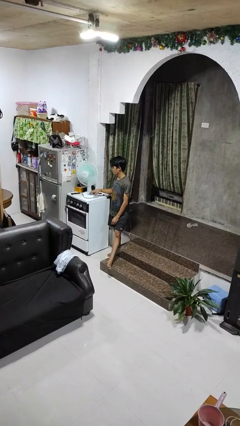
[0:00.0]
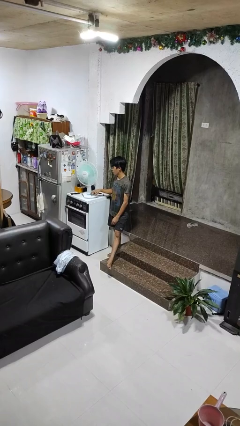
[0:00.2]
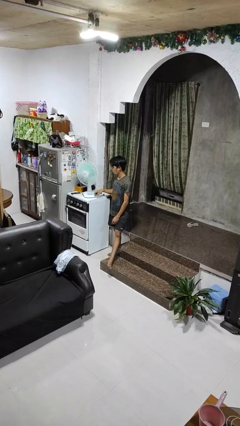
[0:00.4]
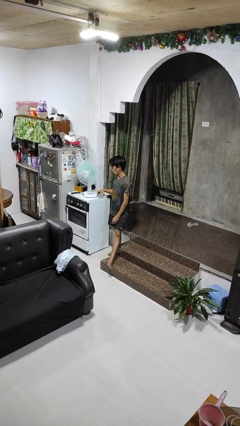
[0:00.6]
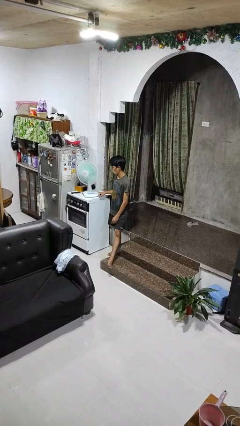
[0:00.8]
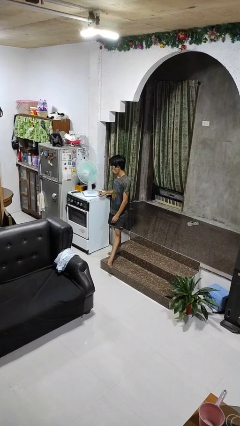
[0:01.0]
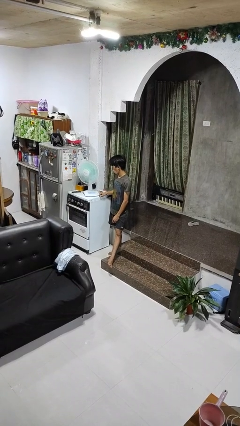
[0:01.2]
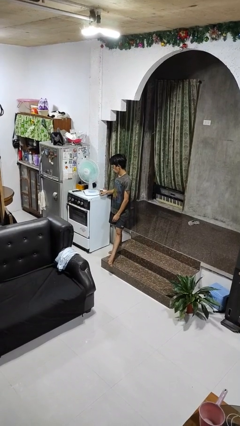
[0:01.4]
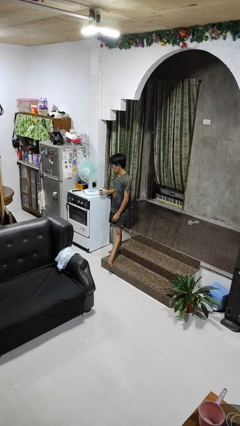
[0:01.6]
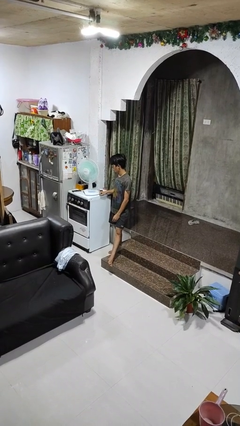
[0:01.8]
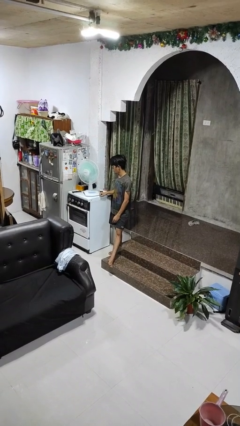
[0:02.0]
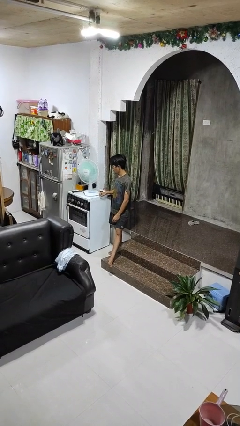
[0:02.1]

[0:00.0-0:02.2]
person turns off fan

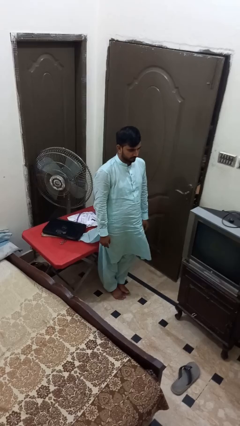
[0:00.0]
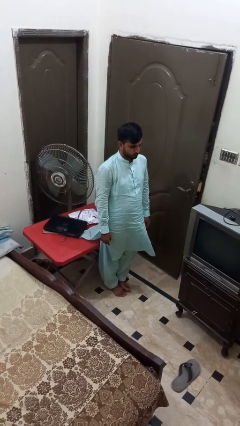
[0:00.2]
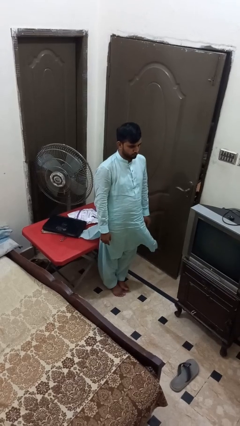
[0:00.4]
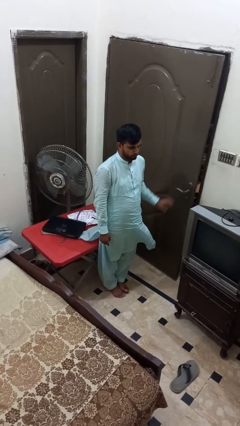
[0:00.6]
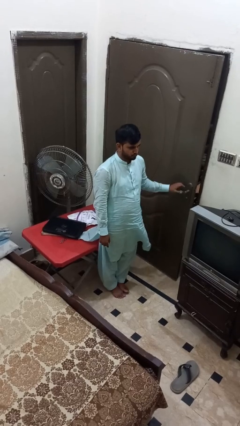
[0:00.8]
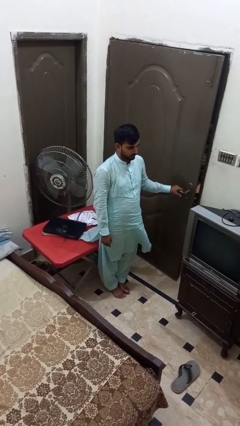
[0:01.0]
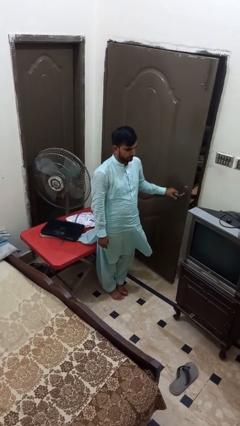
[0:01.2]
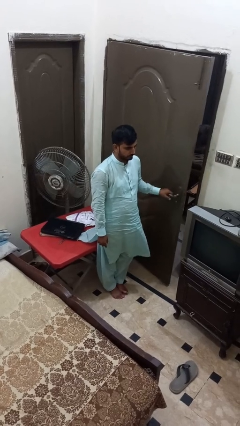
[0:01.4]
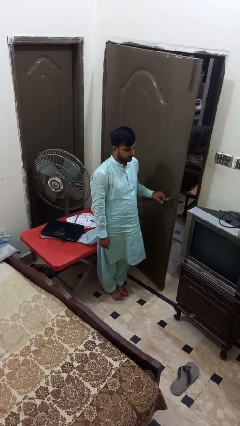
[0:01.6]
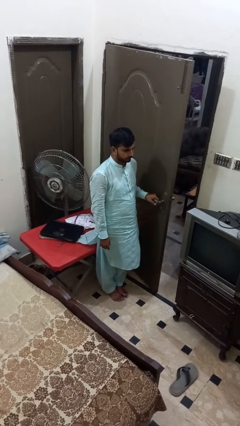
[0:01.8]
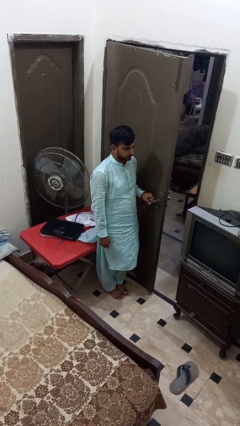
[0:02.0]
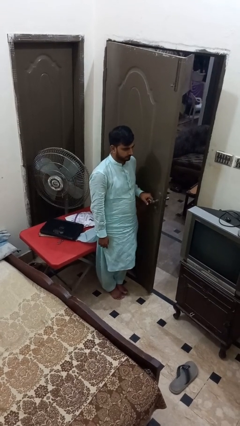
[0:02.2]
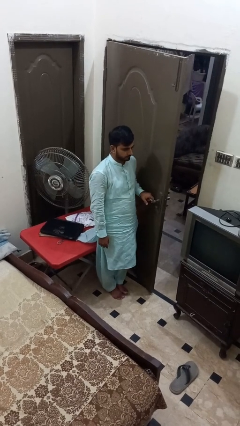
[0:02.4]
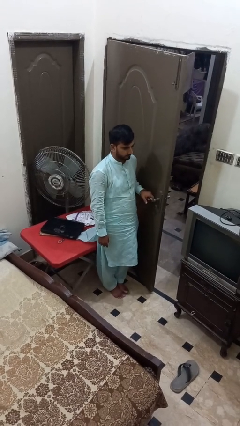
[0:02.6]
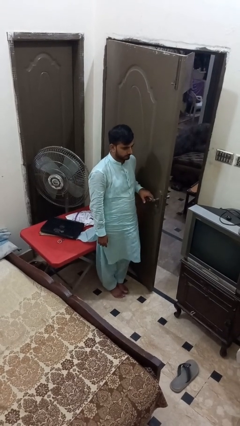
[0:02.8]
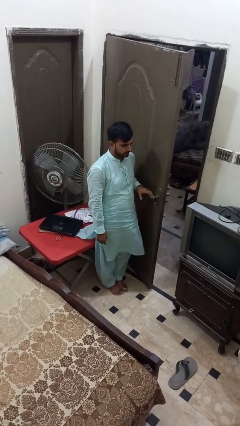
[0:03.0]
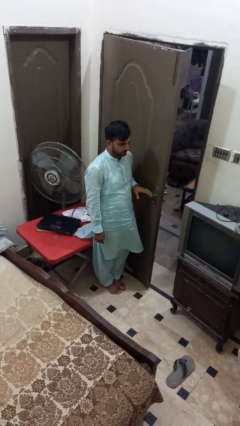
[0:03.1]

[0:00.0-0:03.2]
person opens facility door

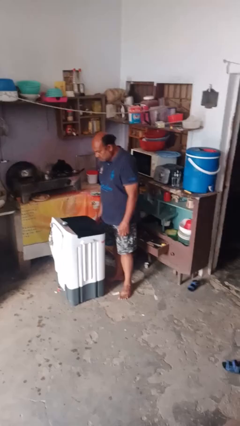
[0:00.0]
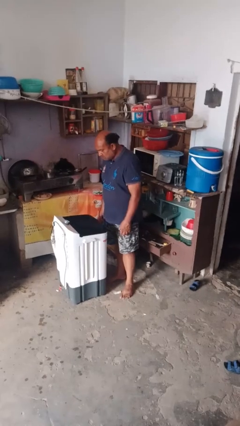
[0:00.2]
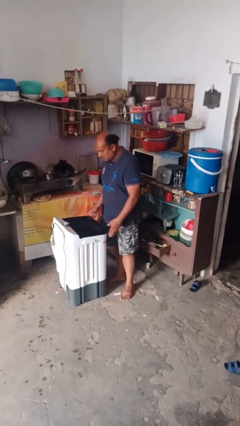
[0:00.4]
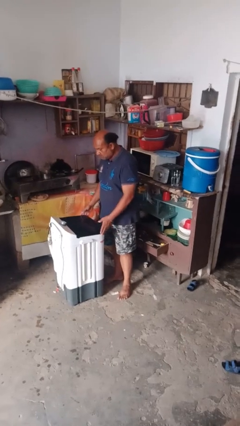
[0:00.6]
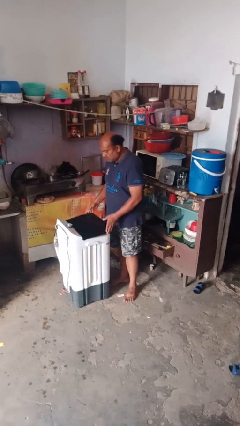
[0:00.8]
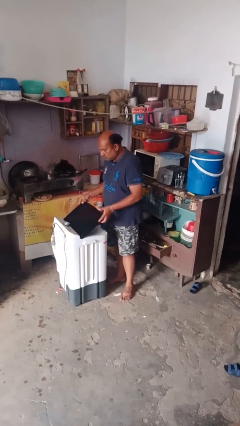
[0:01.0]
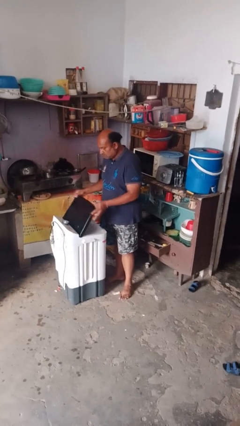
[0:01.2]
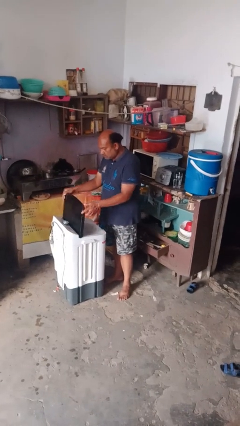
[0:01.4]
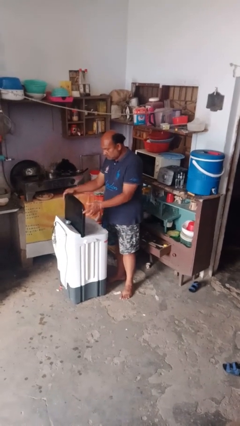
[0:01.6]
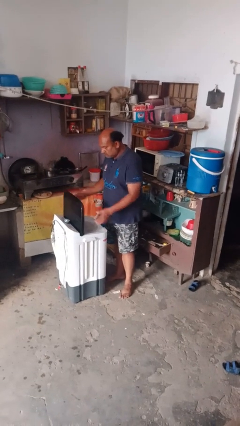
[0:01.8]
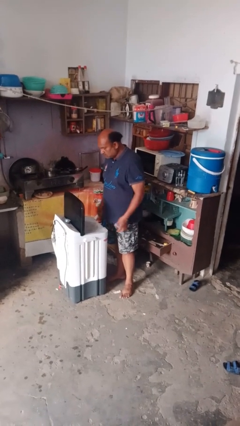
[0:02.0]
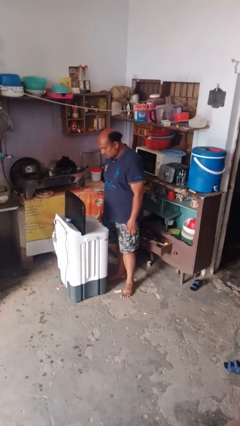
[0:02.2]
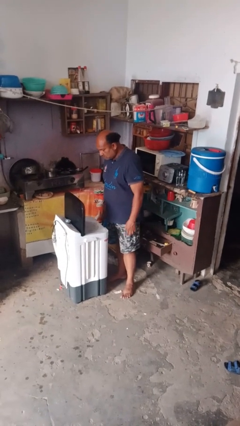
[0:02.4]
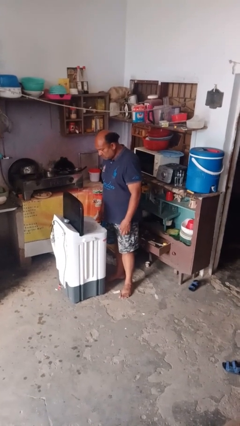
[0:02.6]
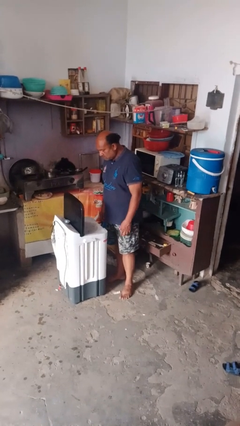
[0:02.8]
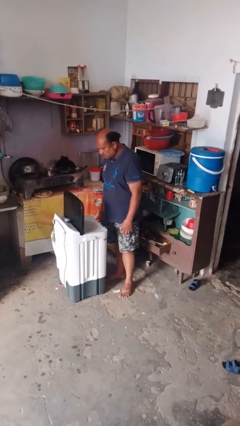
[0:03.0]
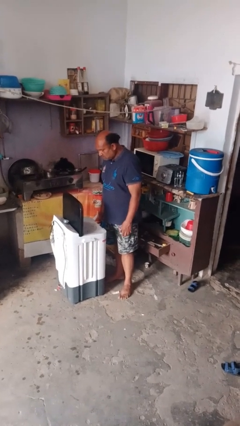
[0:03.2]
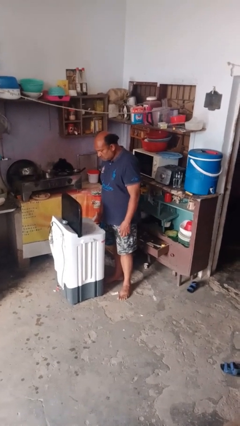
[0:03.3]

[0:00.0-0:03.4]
person opens clothes washer

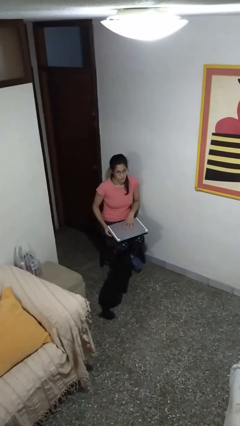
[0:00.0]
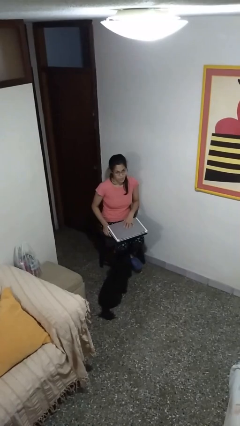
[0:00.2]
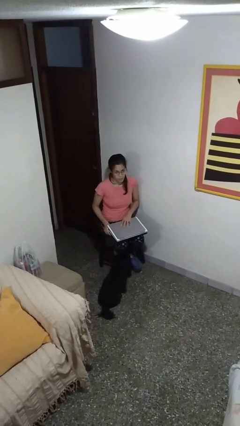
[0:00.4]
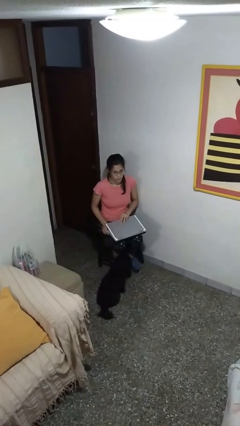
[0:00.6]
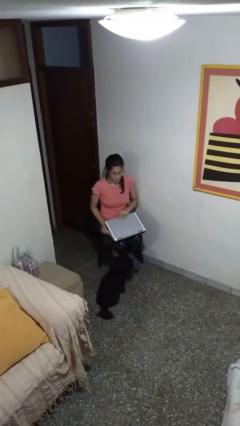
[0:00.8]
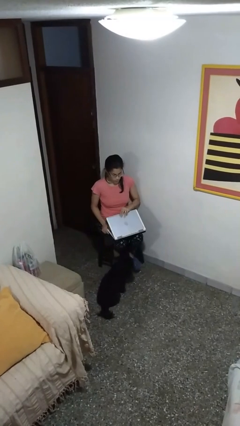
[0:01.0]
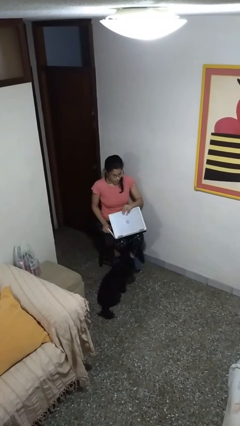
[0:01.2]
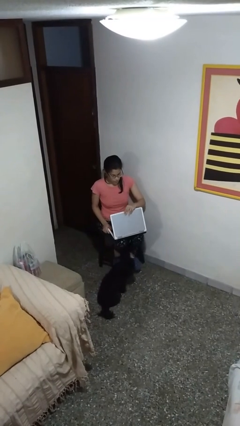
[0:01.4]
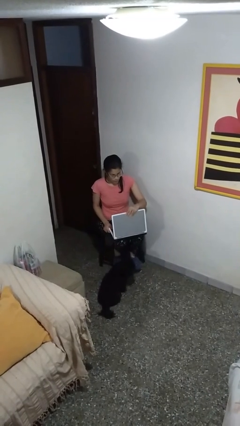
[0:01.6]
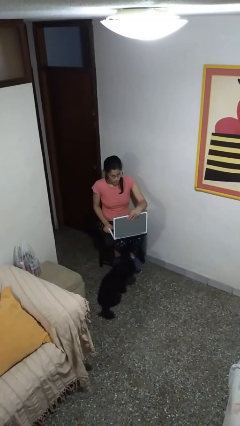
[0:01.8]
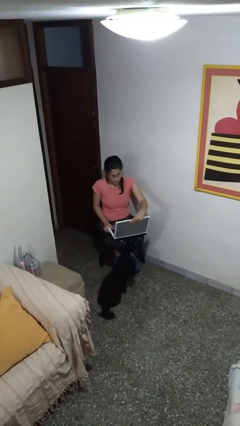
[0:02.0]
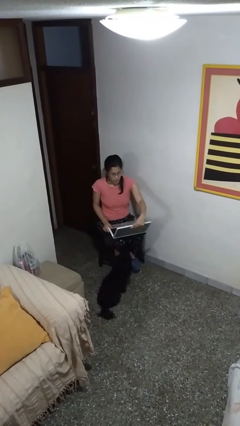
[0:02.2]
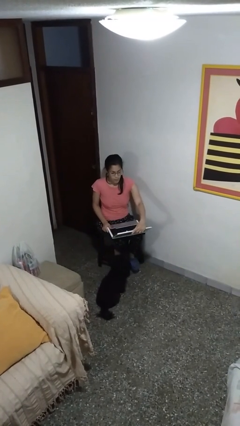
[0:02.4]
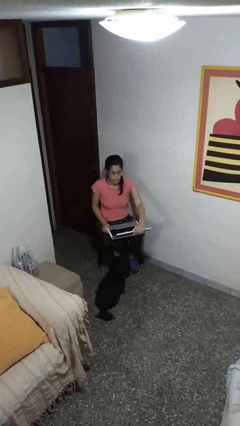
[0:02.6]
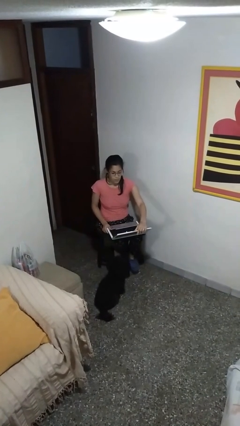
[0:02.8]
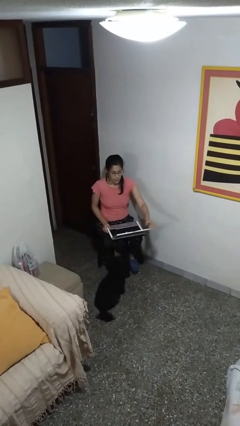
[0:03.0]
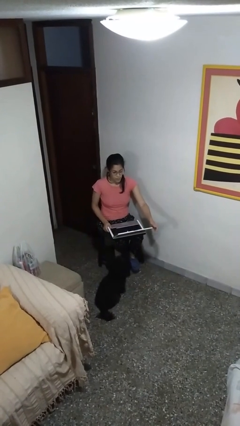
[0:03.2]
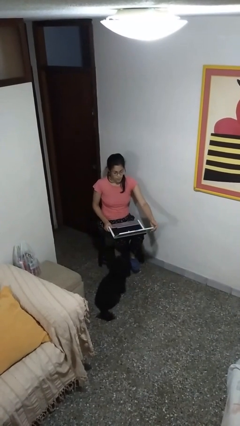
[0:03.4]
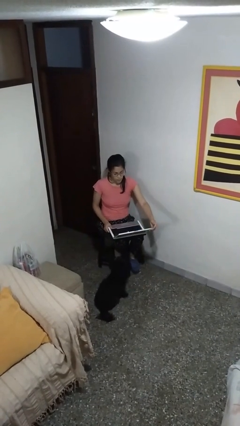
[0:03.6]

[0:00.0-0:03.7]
person opens laptop

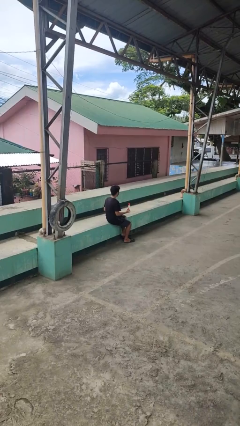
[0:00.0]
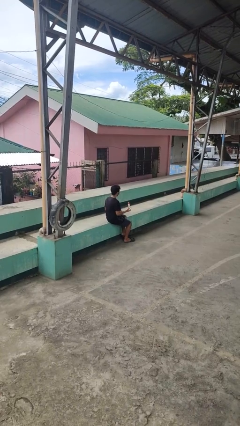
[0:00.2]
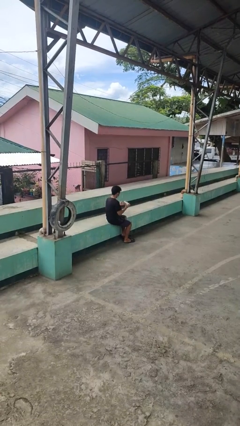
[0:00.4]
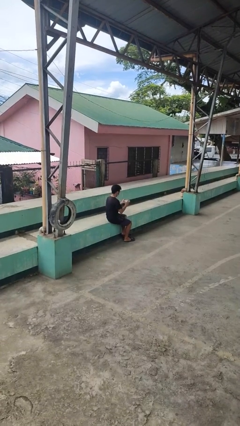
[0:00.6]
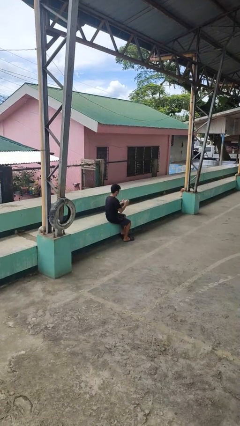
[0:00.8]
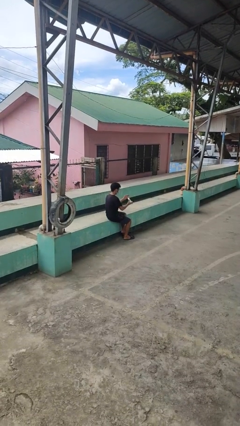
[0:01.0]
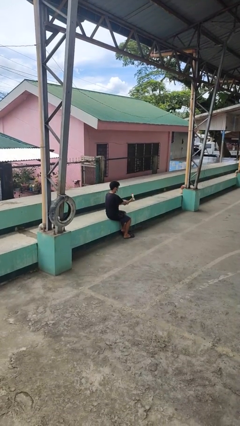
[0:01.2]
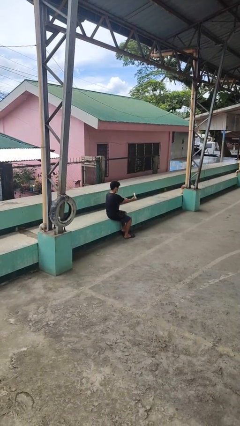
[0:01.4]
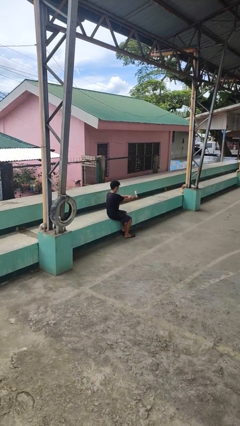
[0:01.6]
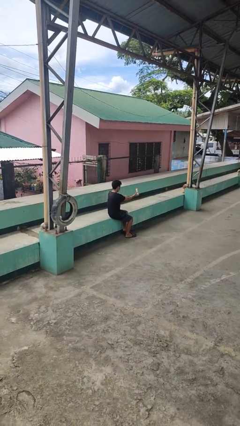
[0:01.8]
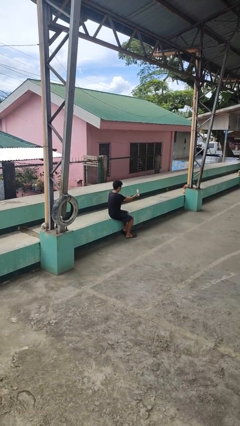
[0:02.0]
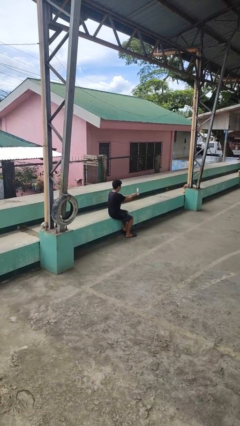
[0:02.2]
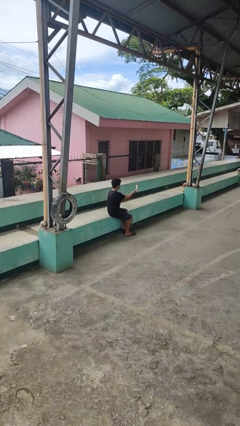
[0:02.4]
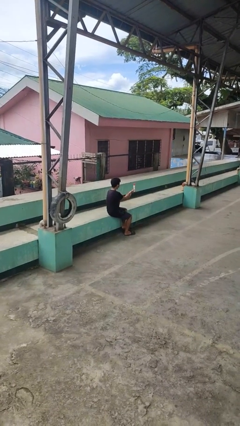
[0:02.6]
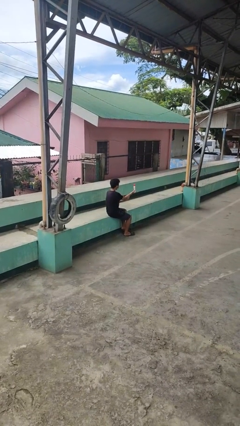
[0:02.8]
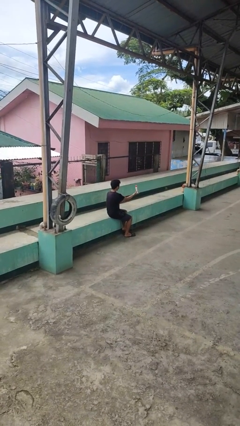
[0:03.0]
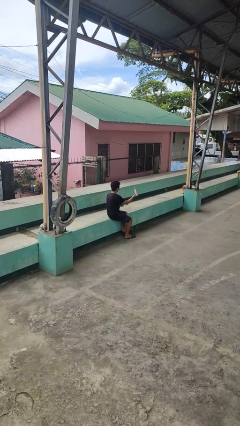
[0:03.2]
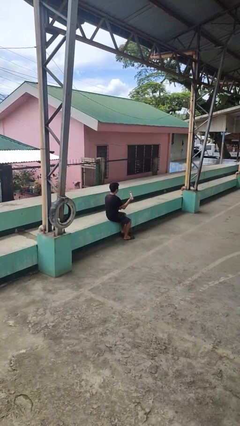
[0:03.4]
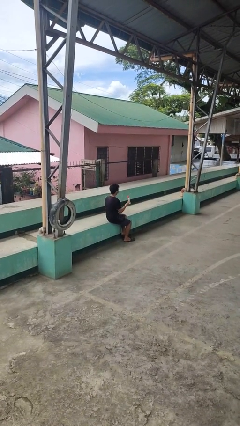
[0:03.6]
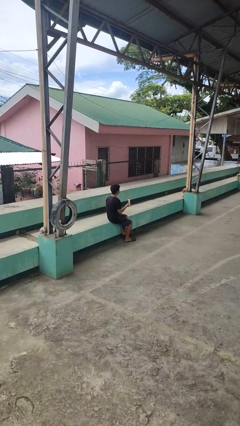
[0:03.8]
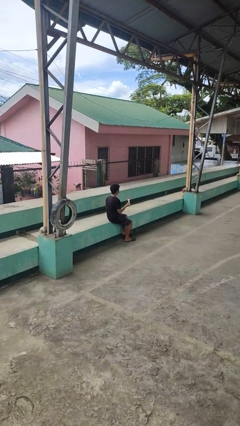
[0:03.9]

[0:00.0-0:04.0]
person applies sunscreen

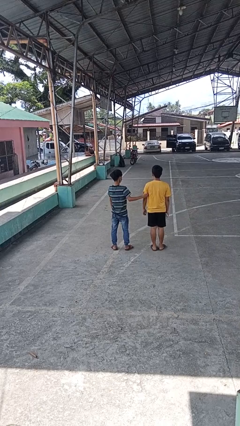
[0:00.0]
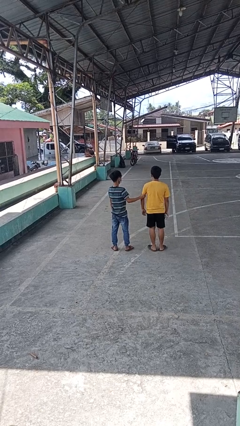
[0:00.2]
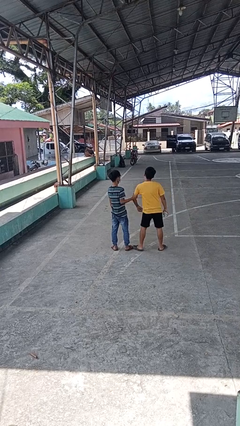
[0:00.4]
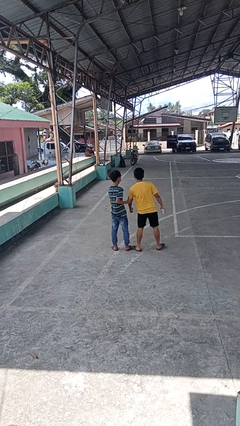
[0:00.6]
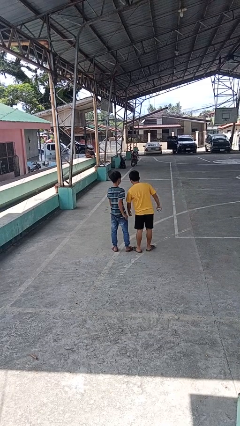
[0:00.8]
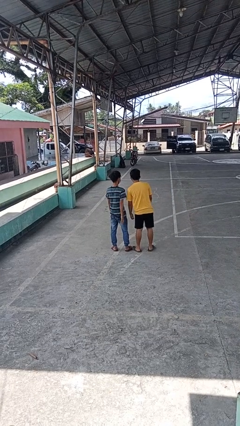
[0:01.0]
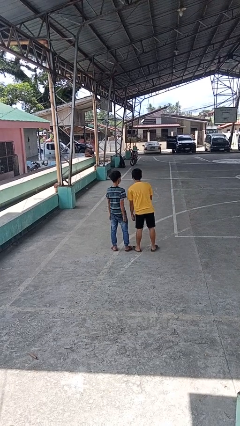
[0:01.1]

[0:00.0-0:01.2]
person grabs person by bicep

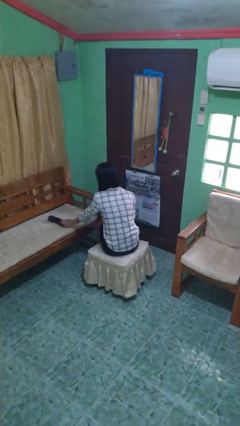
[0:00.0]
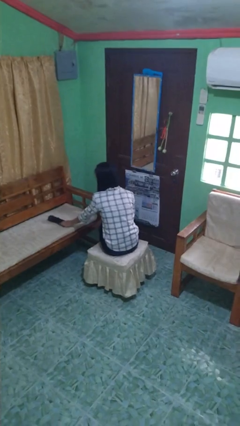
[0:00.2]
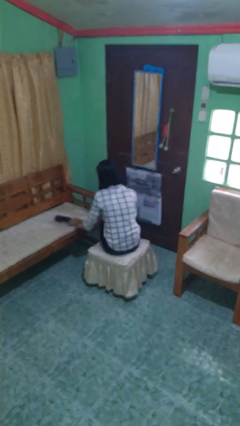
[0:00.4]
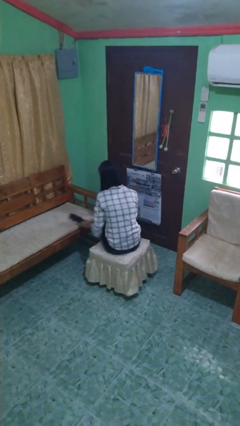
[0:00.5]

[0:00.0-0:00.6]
person picks up object from couch
